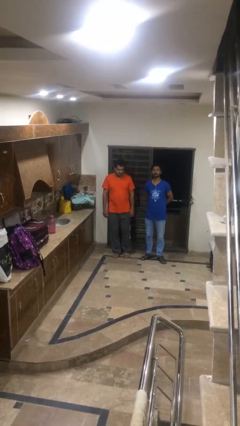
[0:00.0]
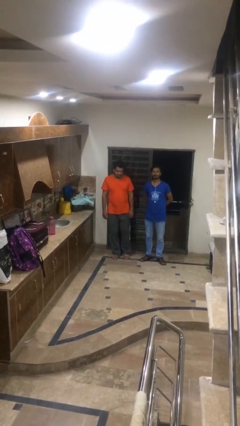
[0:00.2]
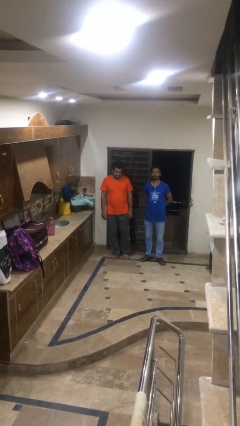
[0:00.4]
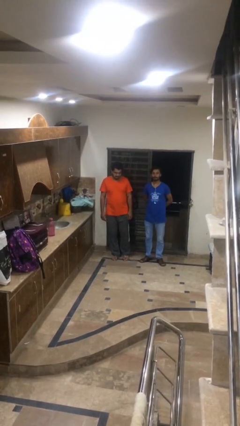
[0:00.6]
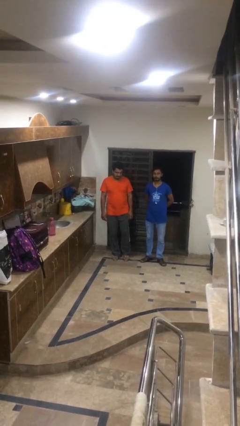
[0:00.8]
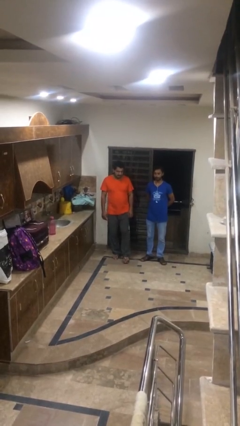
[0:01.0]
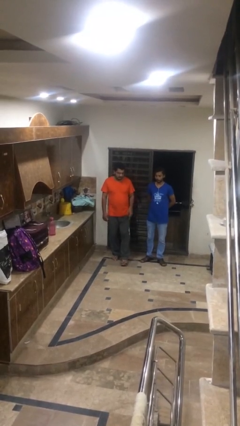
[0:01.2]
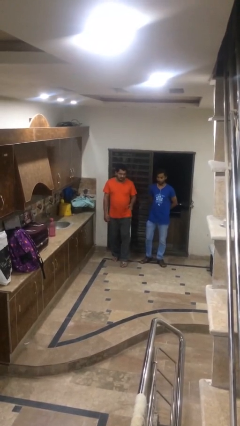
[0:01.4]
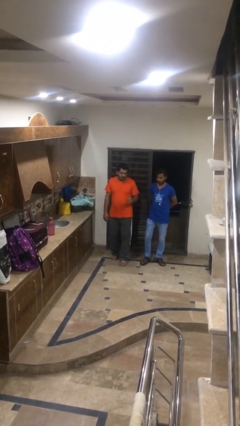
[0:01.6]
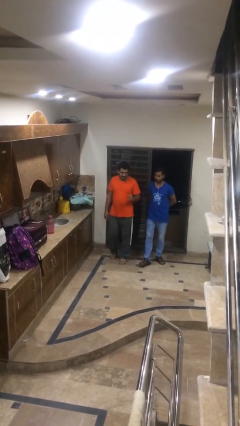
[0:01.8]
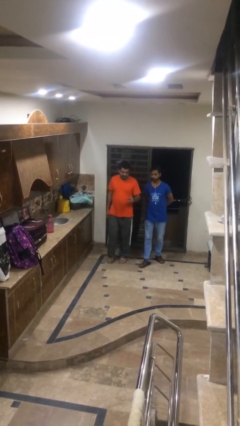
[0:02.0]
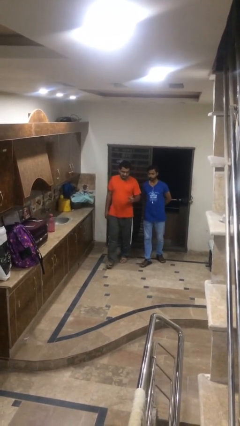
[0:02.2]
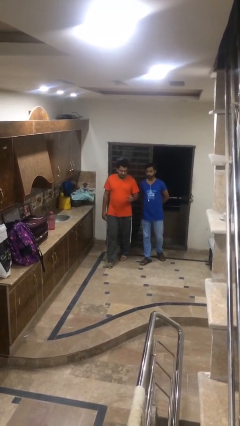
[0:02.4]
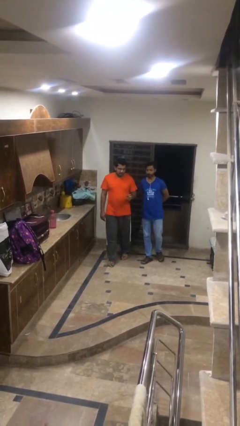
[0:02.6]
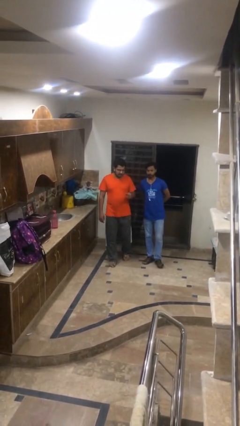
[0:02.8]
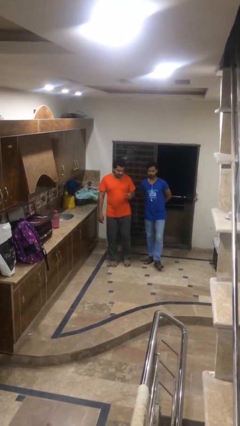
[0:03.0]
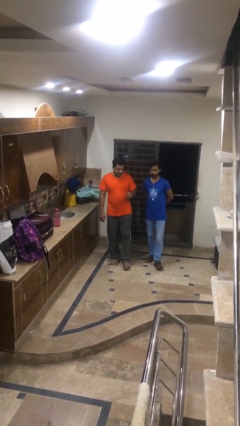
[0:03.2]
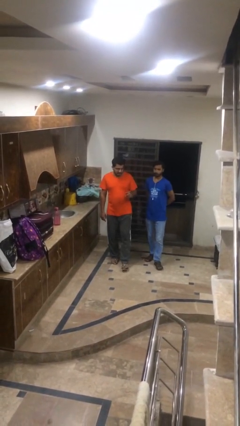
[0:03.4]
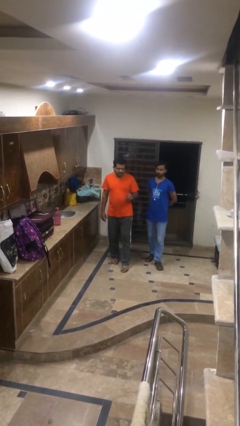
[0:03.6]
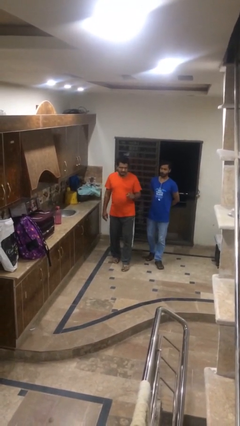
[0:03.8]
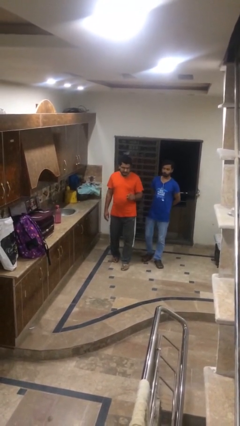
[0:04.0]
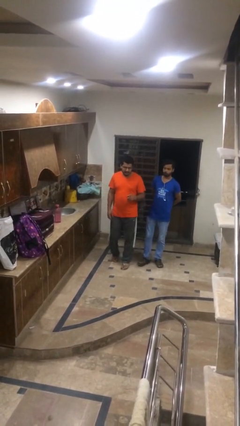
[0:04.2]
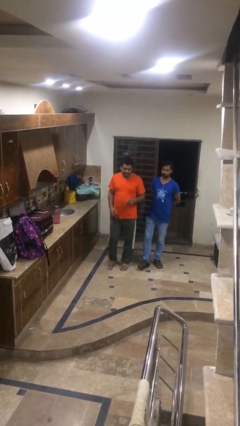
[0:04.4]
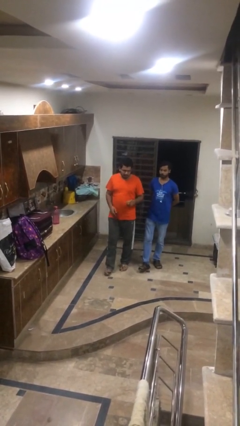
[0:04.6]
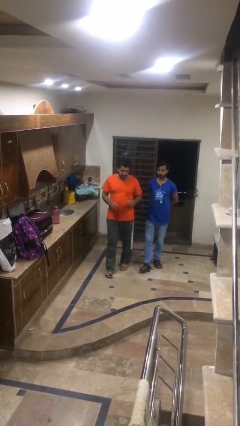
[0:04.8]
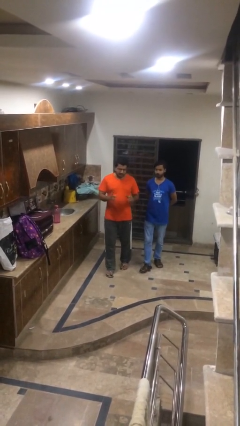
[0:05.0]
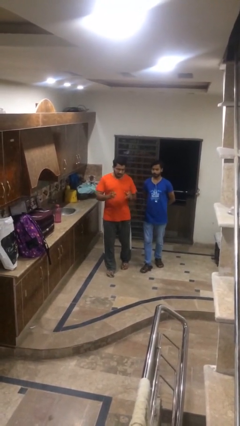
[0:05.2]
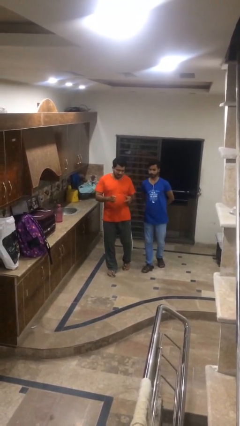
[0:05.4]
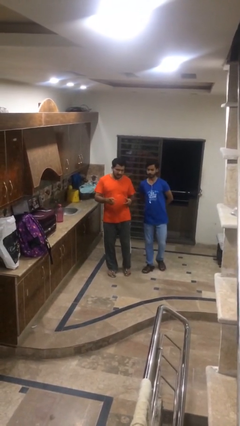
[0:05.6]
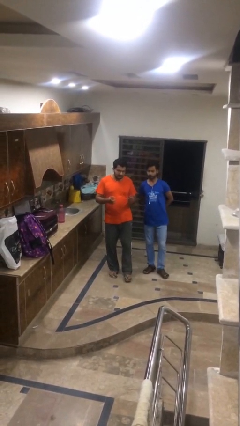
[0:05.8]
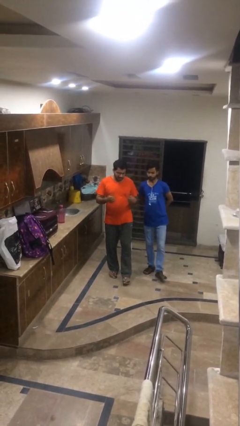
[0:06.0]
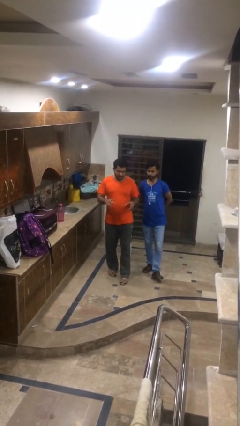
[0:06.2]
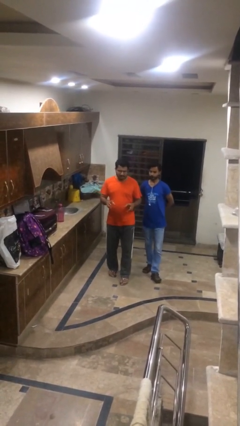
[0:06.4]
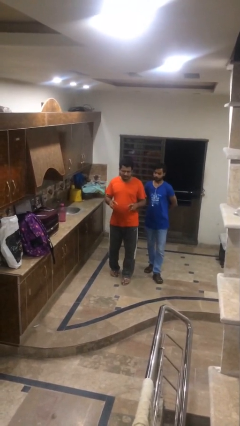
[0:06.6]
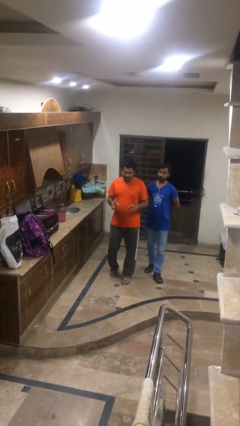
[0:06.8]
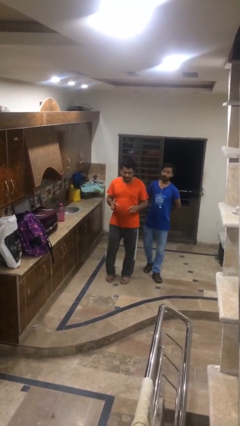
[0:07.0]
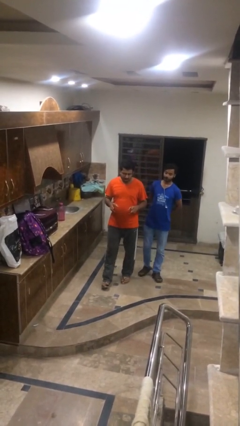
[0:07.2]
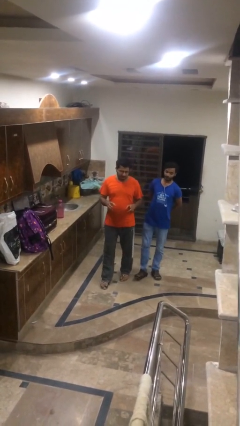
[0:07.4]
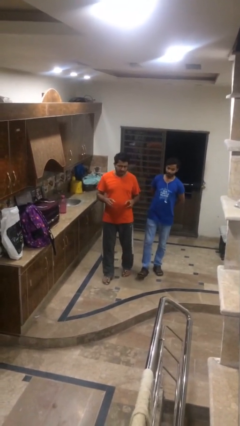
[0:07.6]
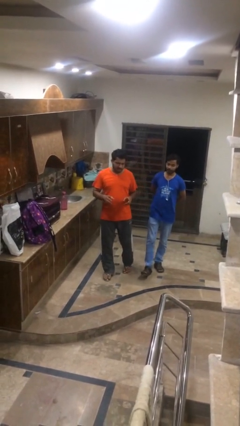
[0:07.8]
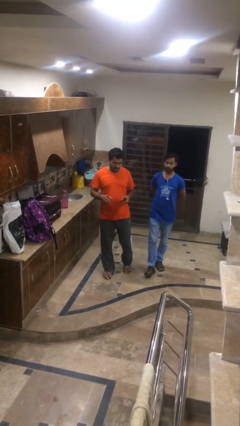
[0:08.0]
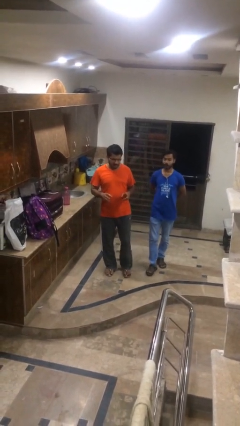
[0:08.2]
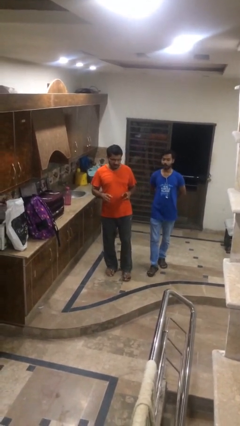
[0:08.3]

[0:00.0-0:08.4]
person talks to person

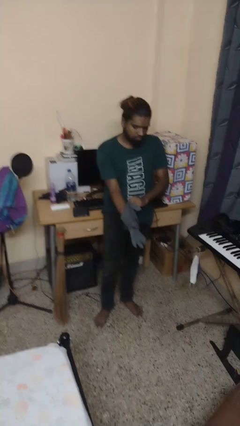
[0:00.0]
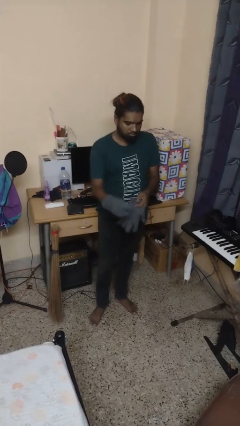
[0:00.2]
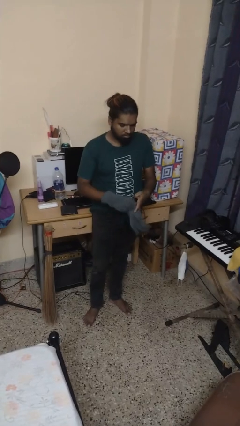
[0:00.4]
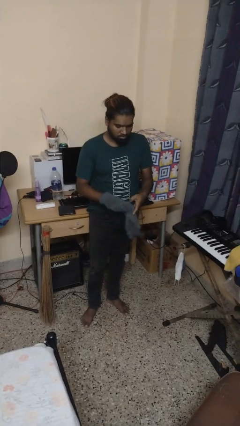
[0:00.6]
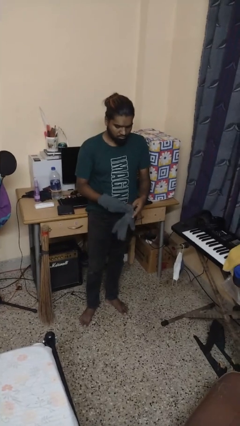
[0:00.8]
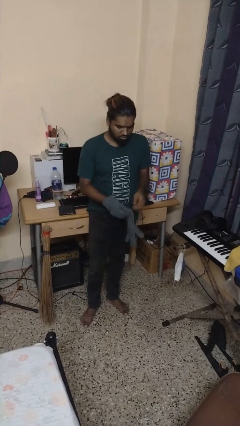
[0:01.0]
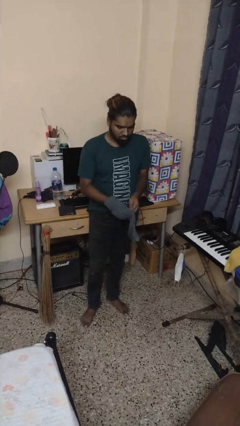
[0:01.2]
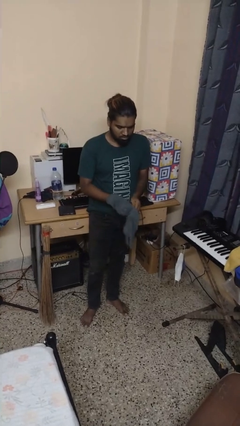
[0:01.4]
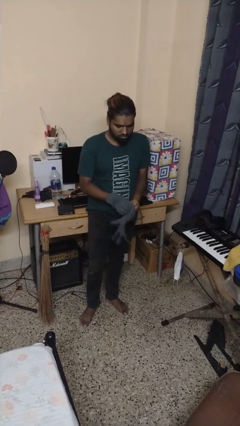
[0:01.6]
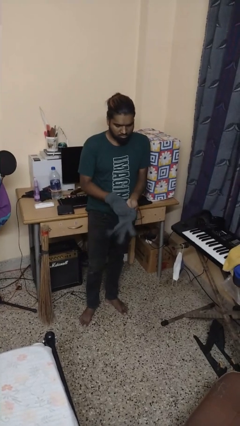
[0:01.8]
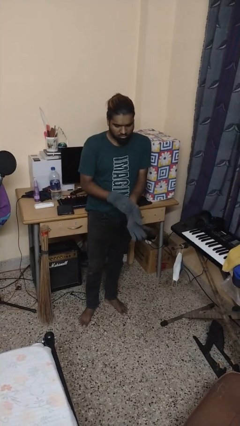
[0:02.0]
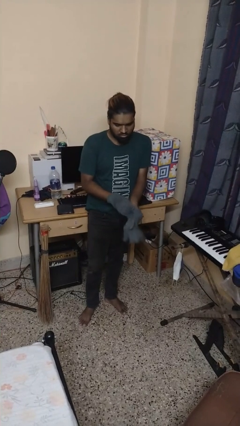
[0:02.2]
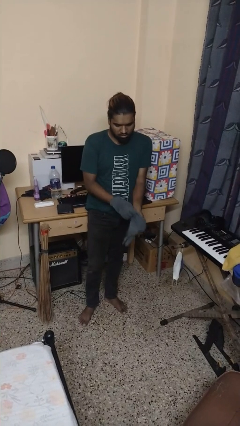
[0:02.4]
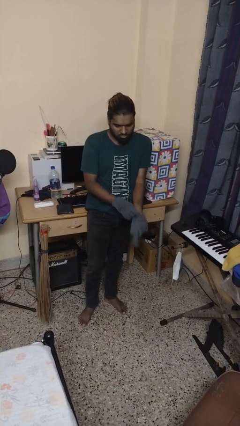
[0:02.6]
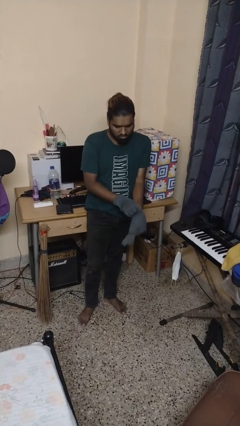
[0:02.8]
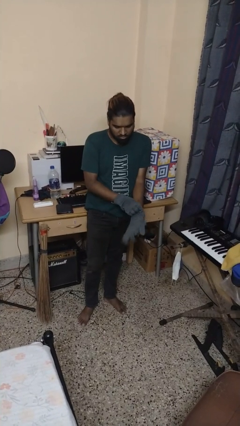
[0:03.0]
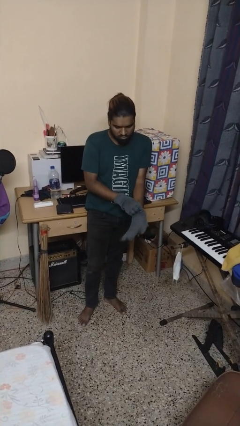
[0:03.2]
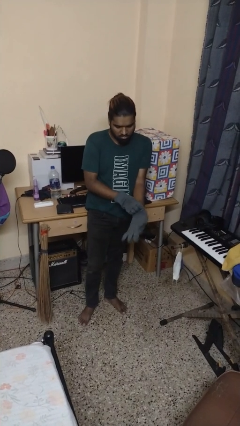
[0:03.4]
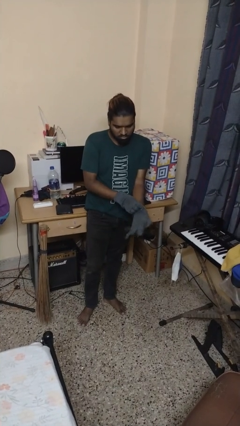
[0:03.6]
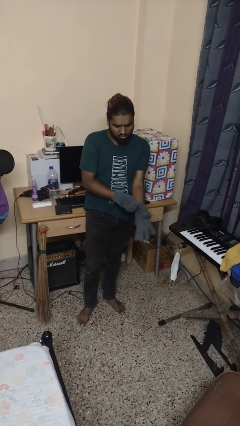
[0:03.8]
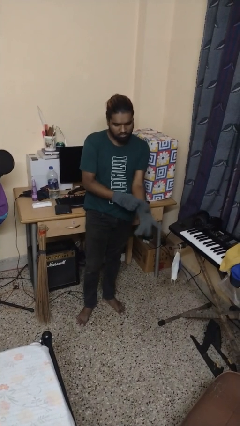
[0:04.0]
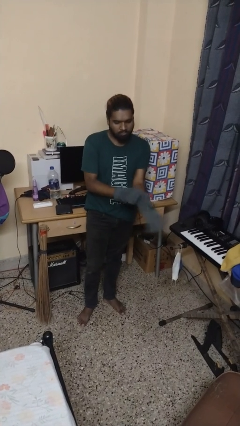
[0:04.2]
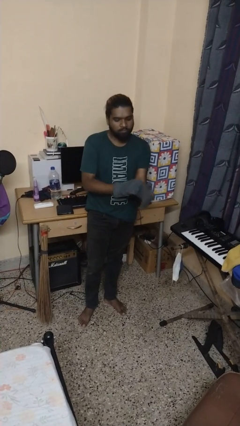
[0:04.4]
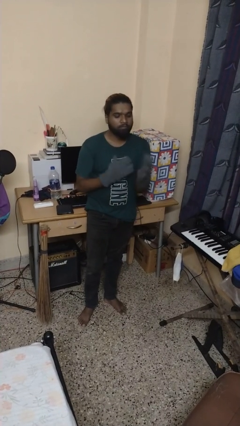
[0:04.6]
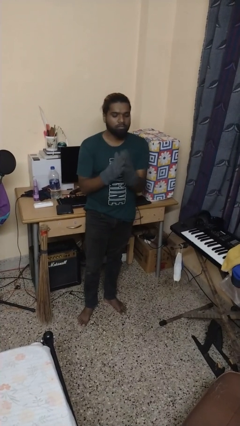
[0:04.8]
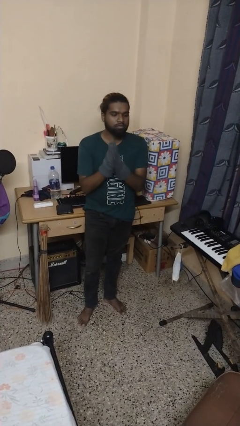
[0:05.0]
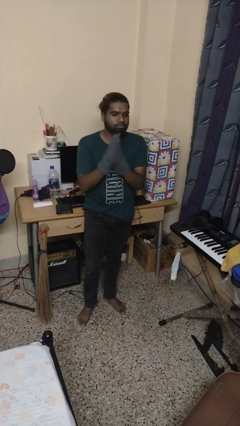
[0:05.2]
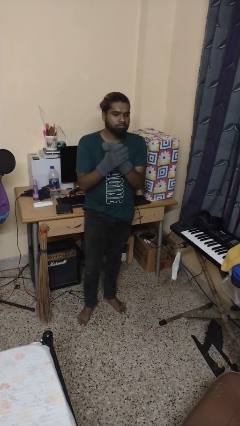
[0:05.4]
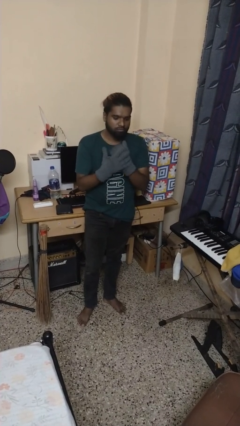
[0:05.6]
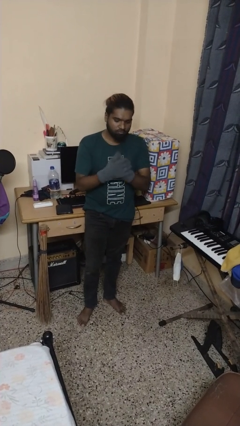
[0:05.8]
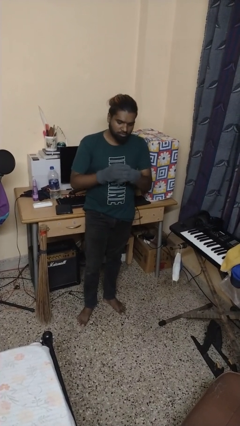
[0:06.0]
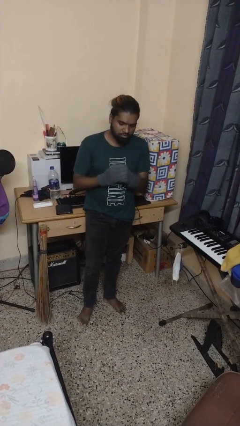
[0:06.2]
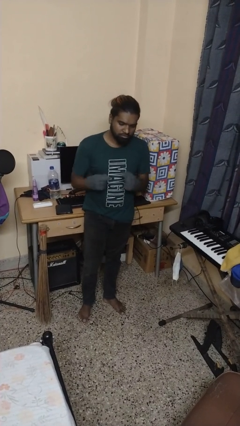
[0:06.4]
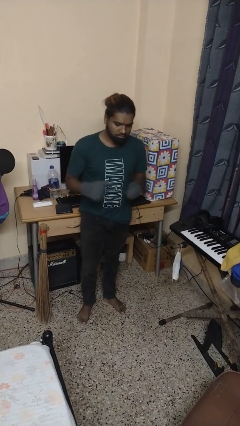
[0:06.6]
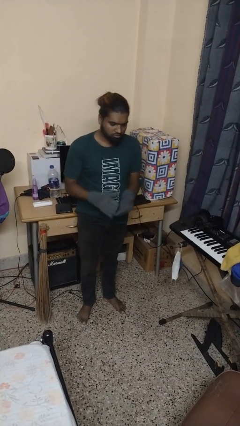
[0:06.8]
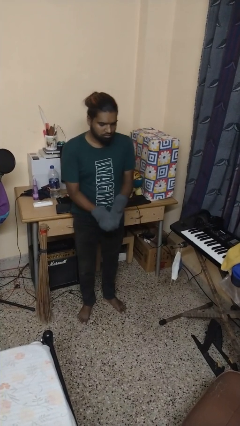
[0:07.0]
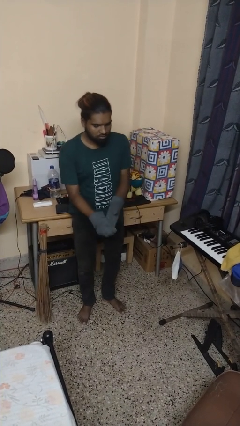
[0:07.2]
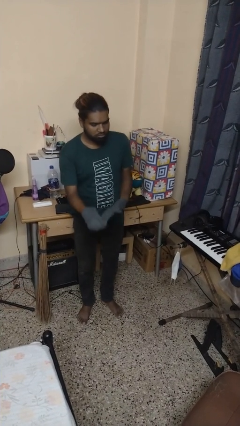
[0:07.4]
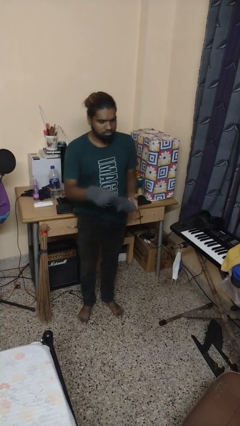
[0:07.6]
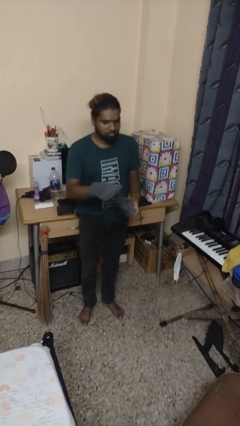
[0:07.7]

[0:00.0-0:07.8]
person puts on gloves

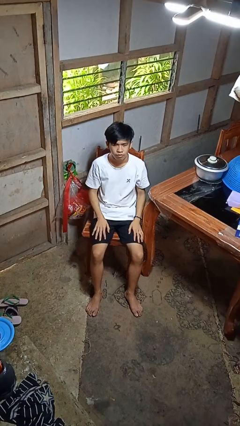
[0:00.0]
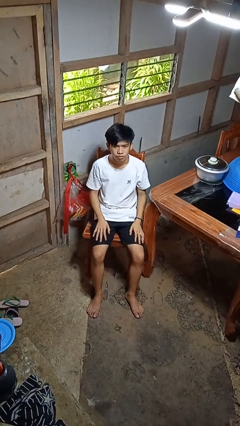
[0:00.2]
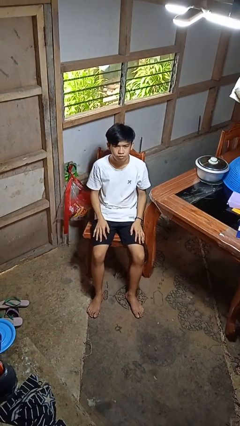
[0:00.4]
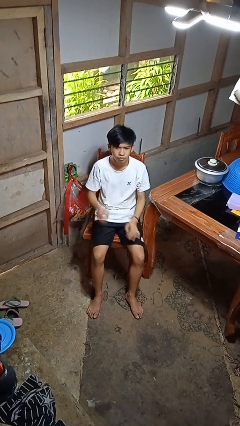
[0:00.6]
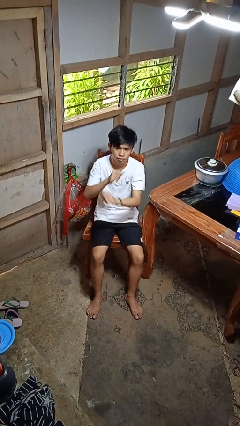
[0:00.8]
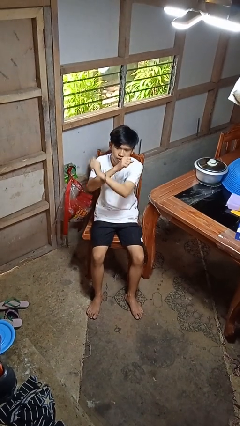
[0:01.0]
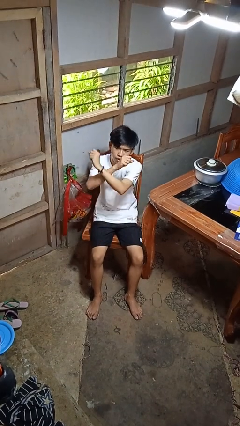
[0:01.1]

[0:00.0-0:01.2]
person gestures arms x

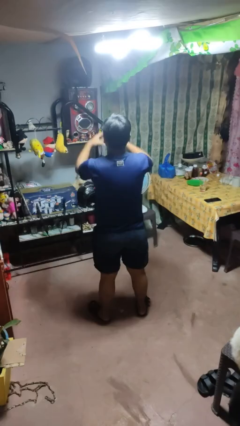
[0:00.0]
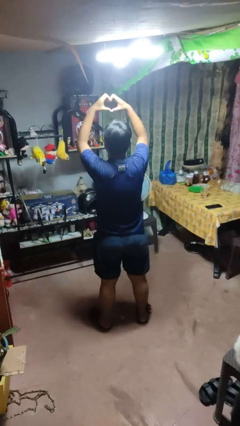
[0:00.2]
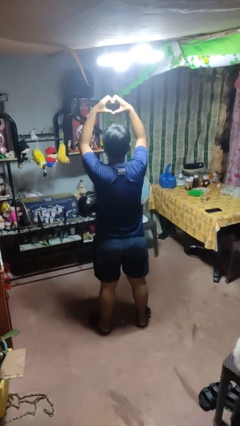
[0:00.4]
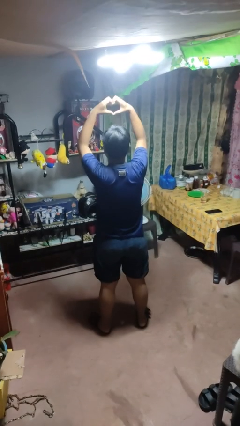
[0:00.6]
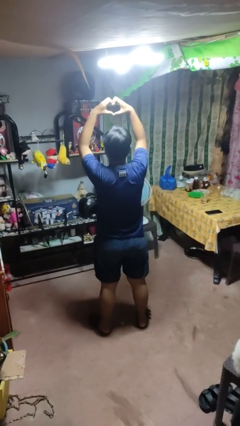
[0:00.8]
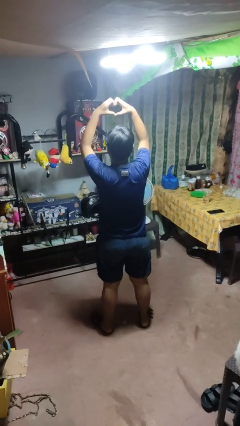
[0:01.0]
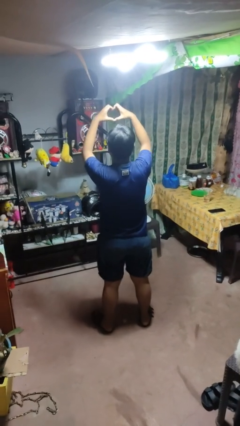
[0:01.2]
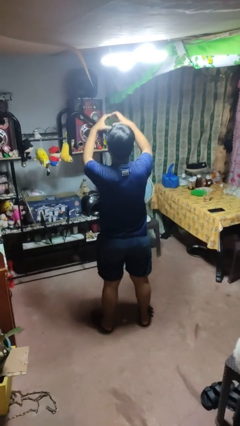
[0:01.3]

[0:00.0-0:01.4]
person gestures heart
